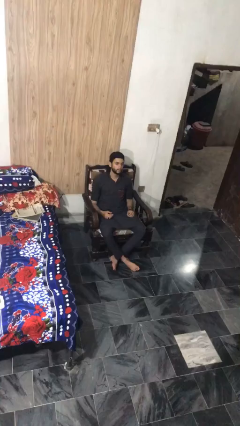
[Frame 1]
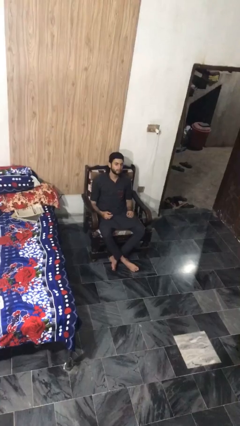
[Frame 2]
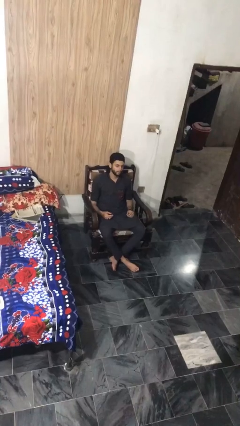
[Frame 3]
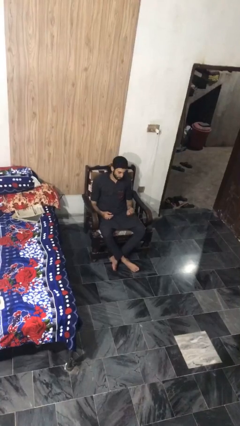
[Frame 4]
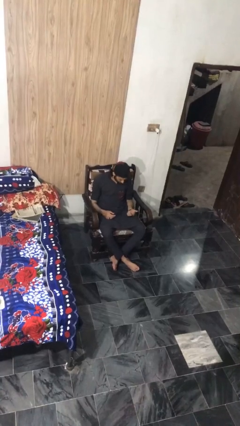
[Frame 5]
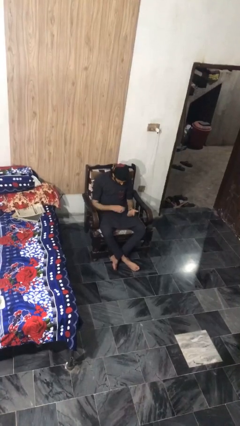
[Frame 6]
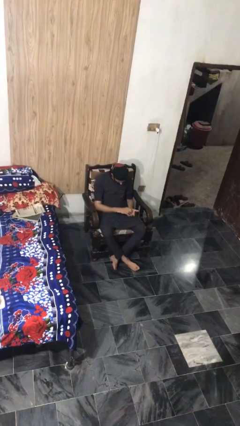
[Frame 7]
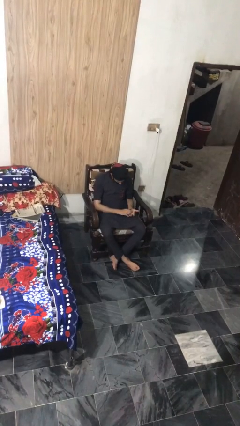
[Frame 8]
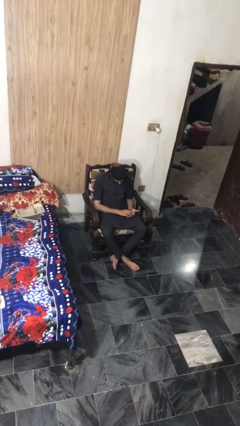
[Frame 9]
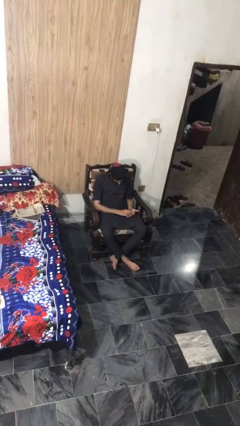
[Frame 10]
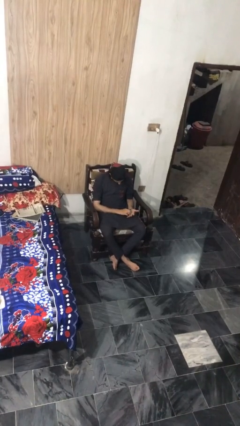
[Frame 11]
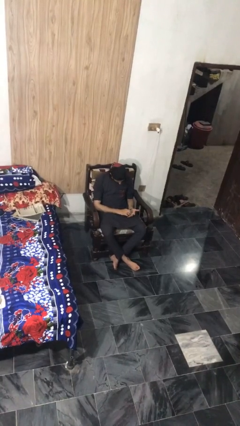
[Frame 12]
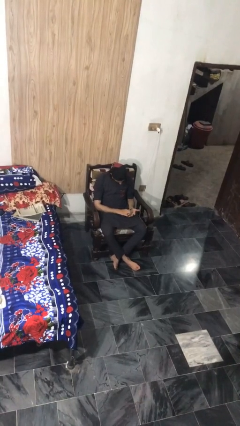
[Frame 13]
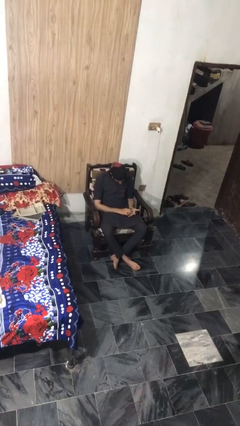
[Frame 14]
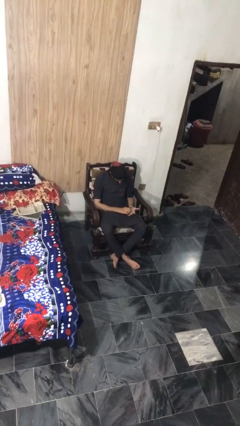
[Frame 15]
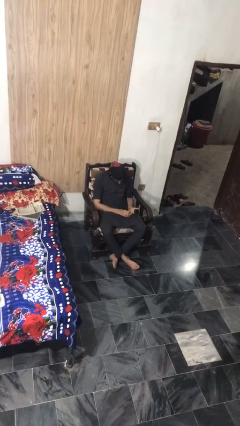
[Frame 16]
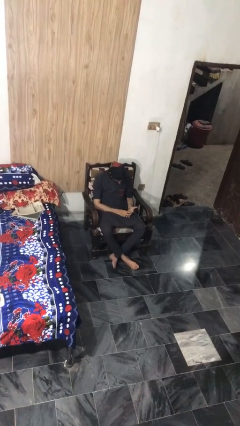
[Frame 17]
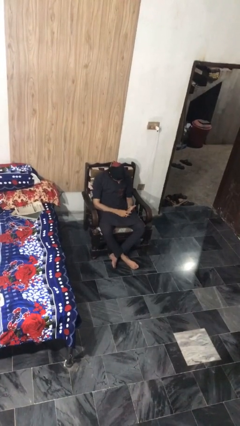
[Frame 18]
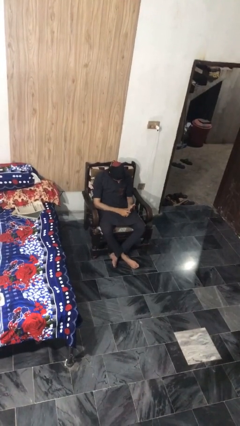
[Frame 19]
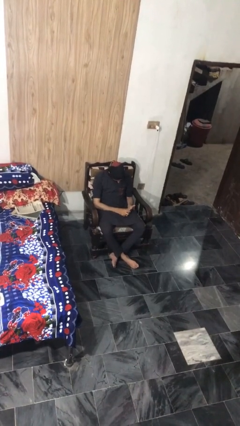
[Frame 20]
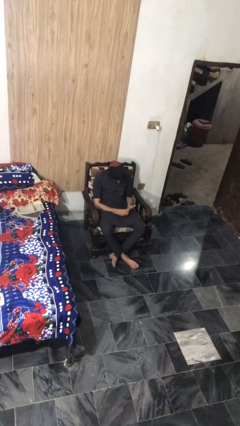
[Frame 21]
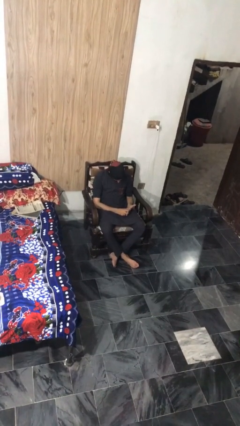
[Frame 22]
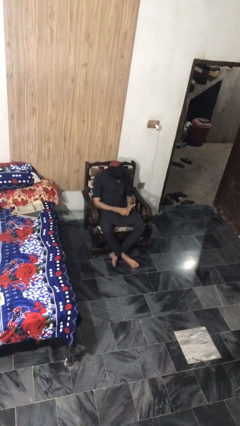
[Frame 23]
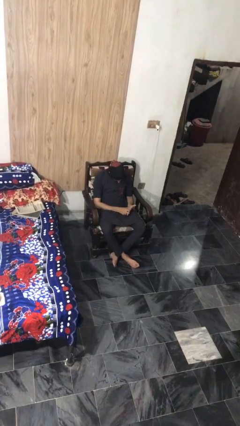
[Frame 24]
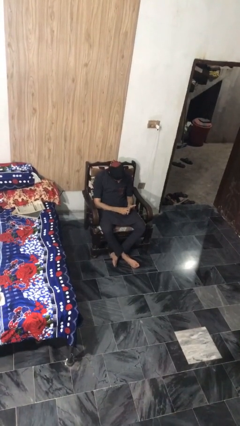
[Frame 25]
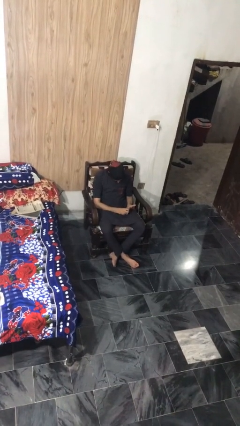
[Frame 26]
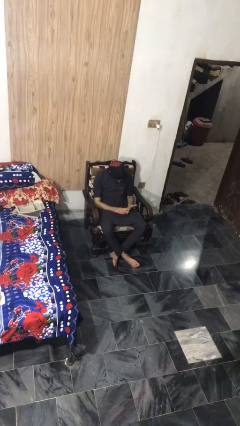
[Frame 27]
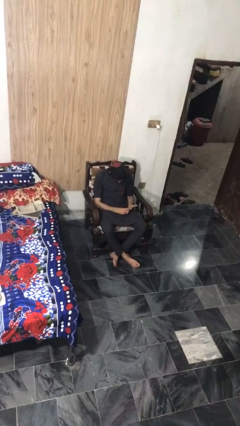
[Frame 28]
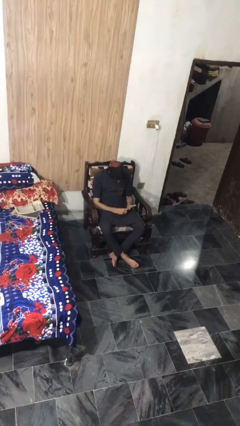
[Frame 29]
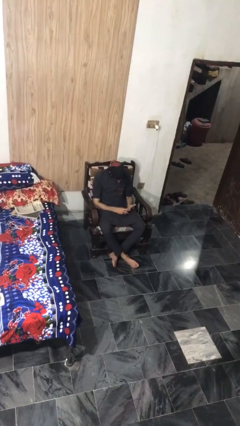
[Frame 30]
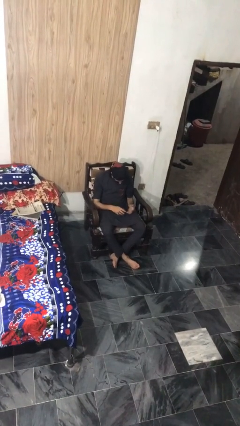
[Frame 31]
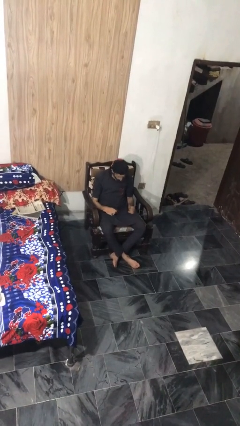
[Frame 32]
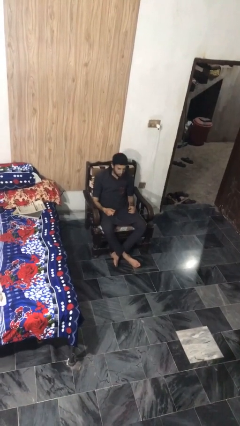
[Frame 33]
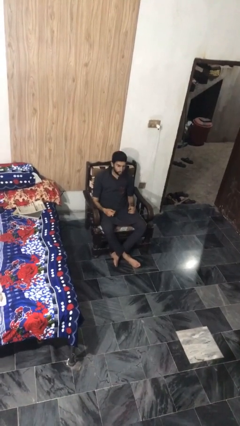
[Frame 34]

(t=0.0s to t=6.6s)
person looks at hands in lap

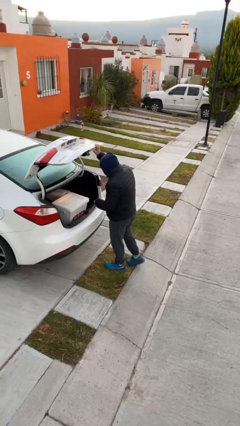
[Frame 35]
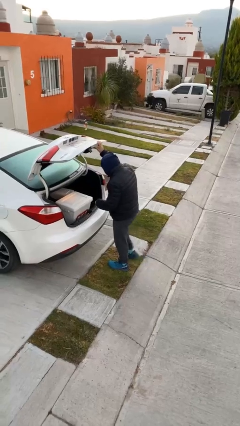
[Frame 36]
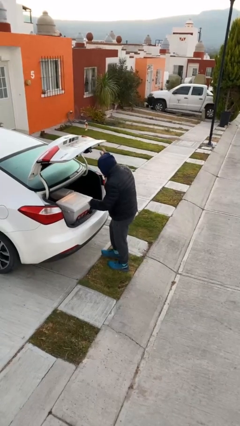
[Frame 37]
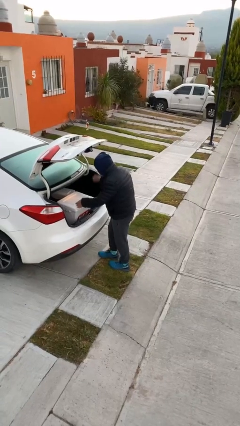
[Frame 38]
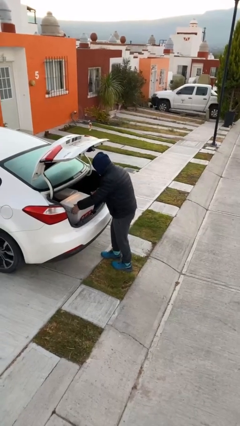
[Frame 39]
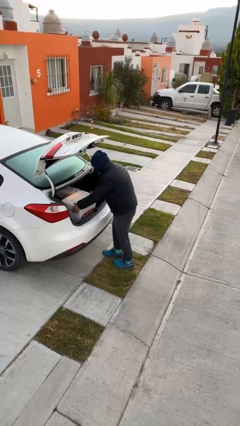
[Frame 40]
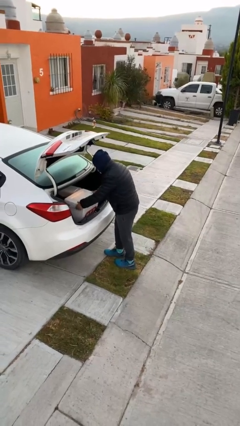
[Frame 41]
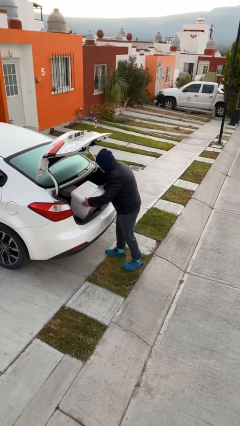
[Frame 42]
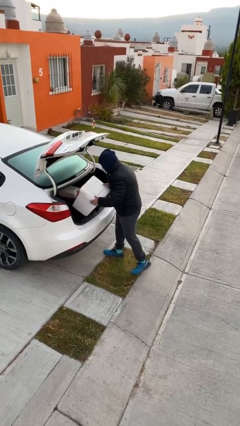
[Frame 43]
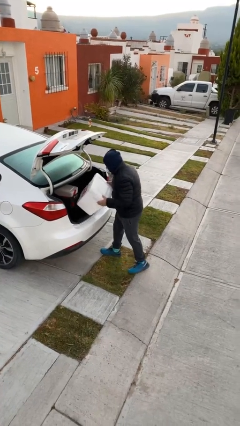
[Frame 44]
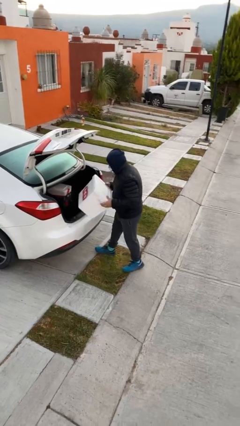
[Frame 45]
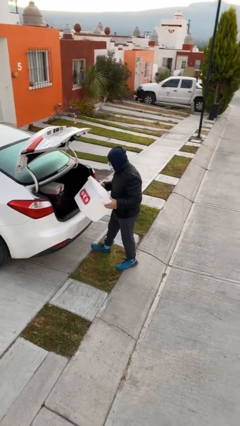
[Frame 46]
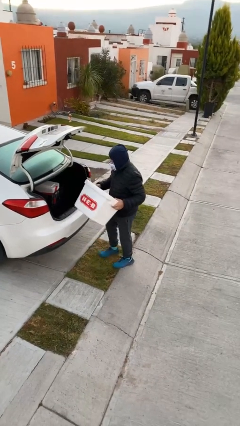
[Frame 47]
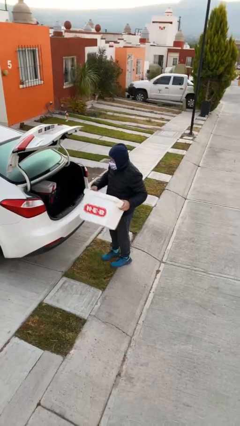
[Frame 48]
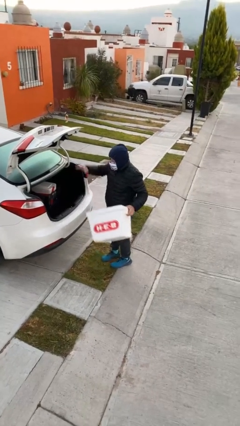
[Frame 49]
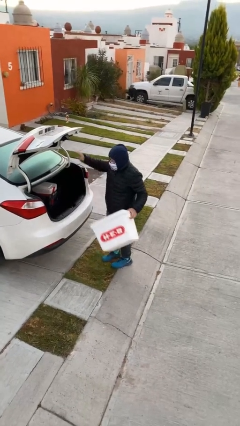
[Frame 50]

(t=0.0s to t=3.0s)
person unloads car

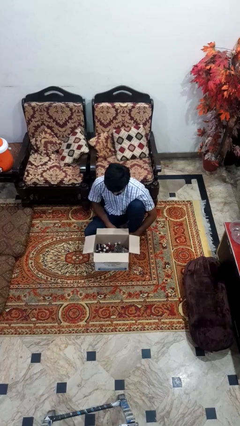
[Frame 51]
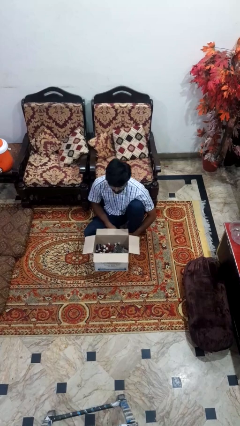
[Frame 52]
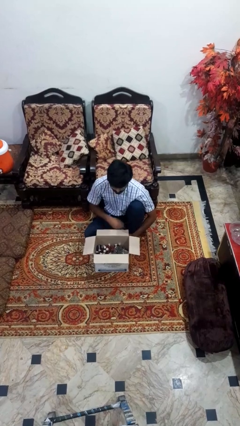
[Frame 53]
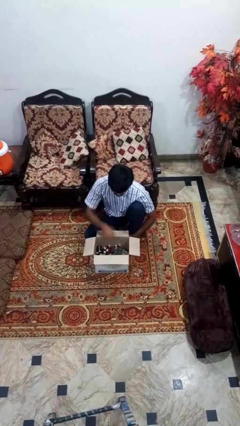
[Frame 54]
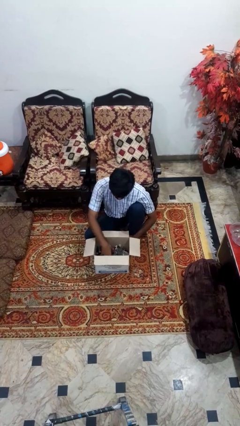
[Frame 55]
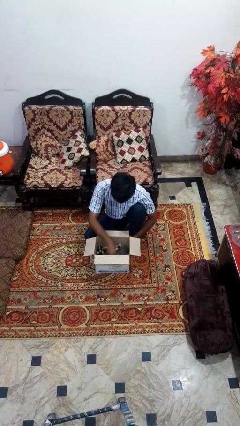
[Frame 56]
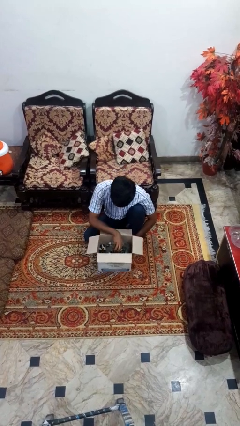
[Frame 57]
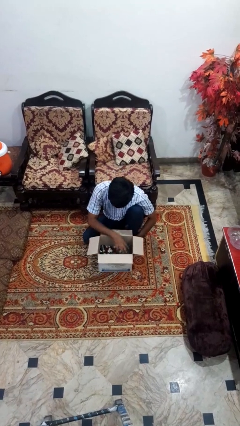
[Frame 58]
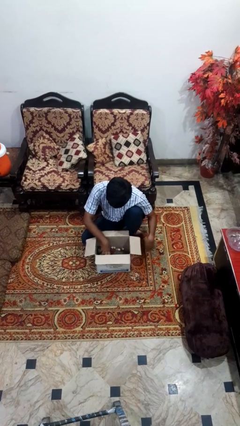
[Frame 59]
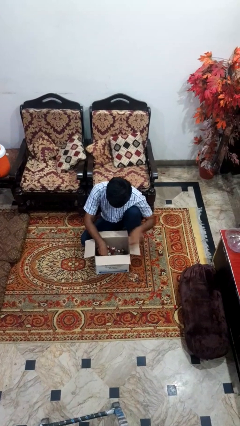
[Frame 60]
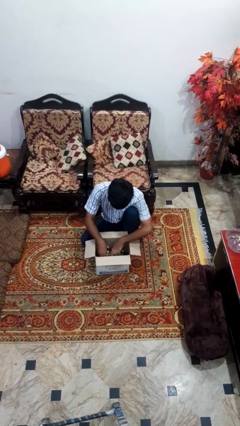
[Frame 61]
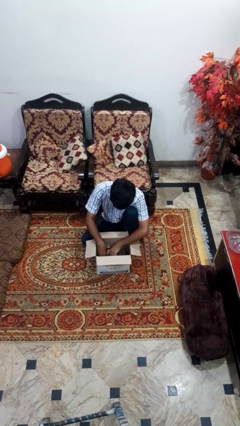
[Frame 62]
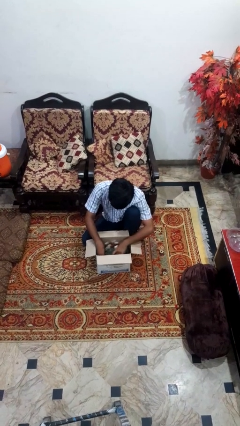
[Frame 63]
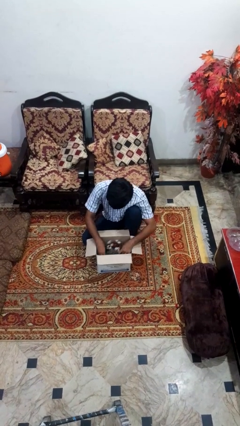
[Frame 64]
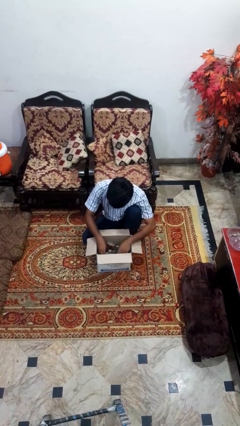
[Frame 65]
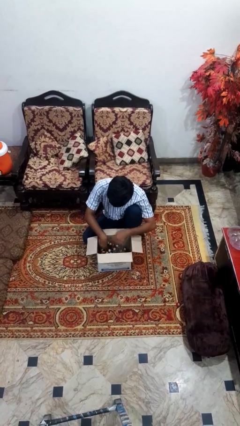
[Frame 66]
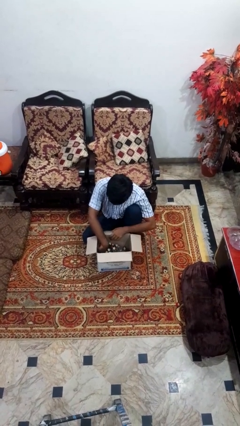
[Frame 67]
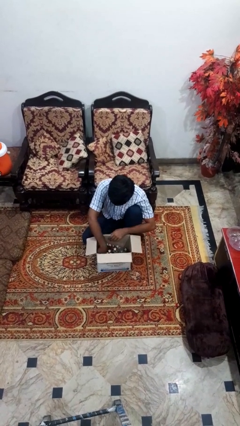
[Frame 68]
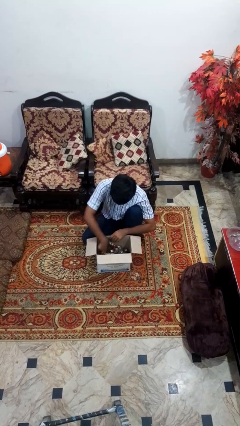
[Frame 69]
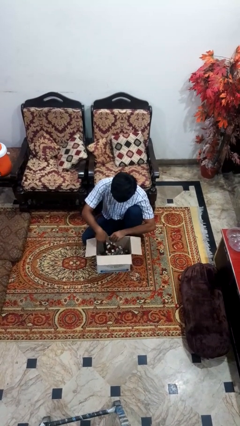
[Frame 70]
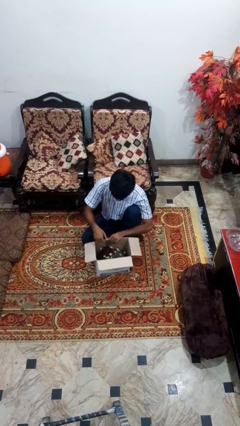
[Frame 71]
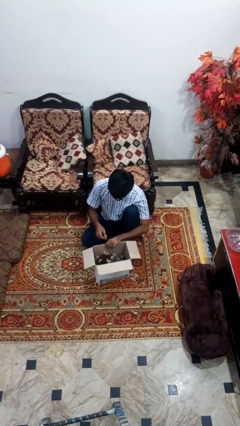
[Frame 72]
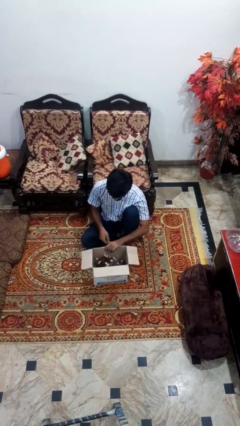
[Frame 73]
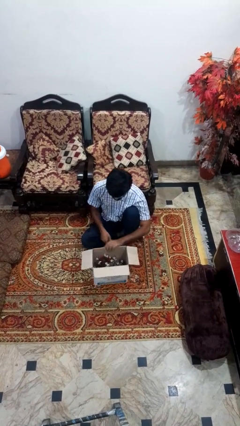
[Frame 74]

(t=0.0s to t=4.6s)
person searches in box

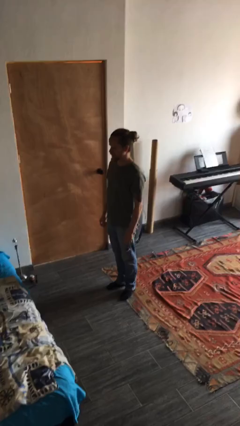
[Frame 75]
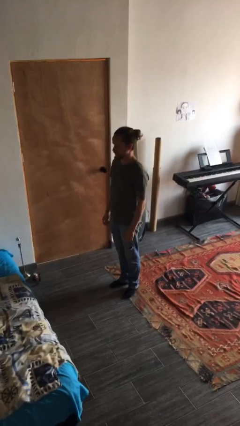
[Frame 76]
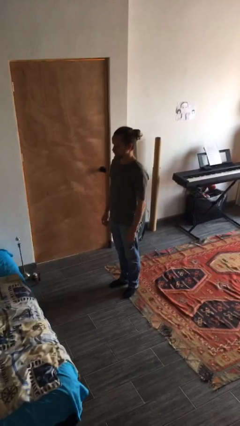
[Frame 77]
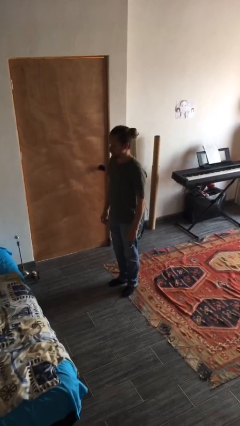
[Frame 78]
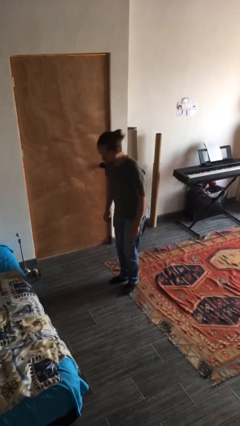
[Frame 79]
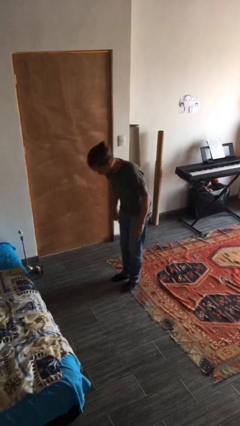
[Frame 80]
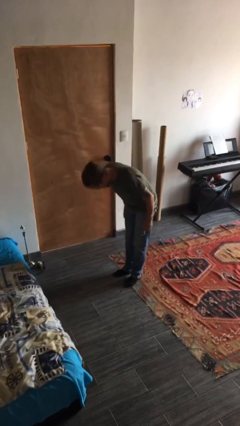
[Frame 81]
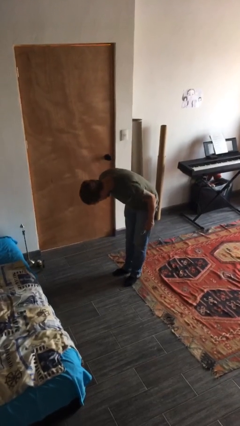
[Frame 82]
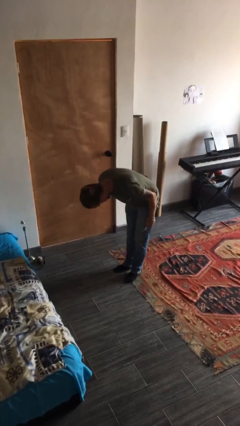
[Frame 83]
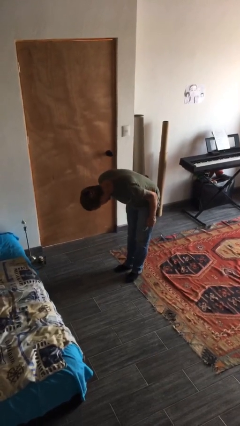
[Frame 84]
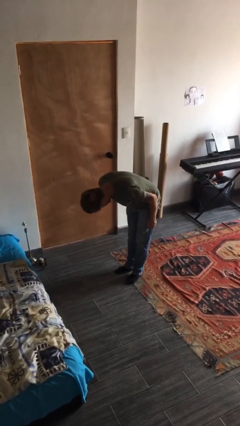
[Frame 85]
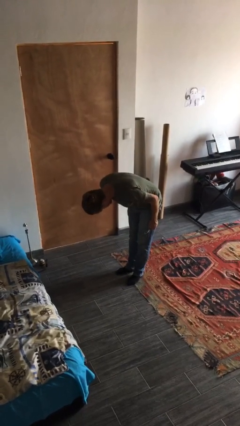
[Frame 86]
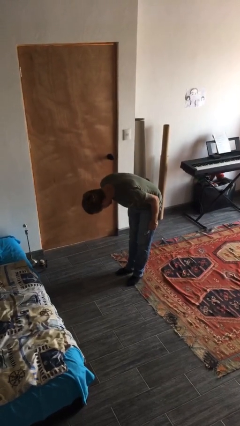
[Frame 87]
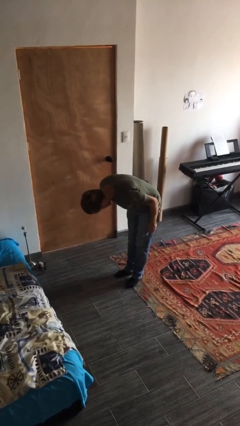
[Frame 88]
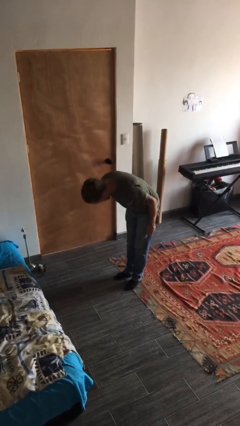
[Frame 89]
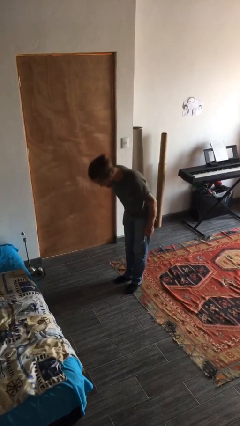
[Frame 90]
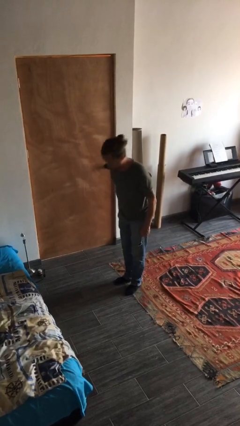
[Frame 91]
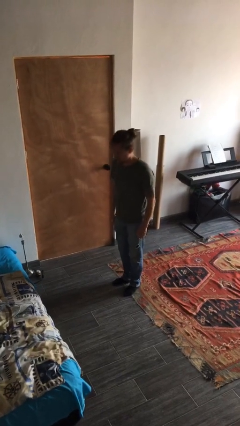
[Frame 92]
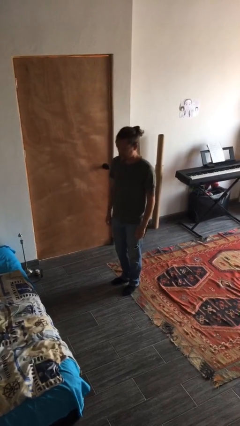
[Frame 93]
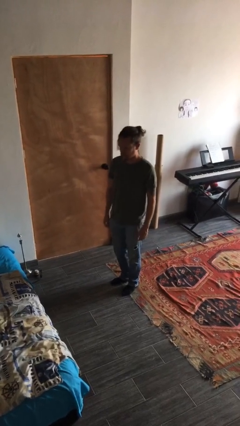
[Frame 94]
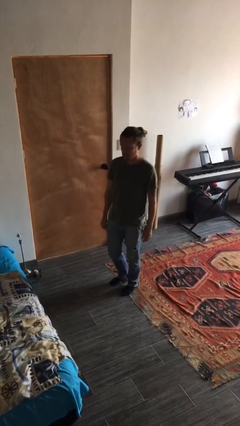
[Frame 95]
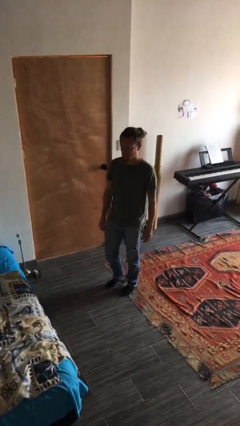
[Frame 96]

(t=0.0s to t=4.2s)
person bows
